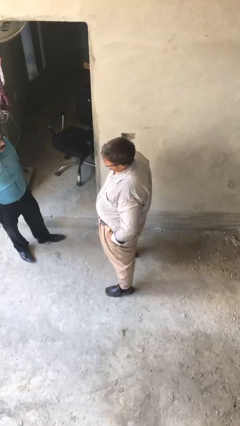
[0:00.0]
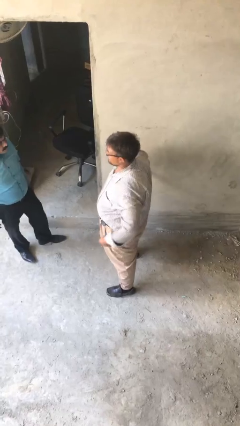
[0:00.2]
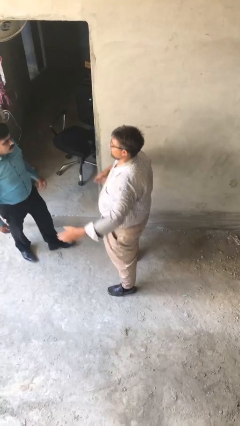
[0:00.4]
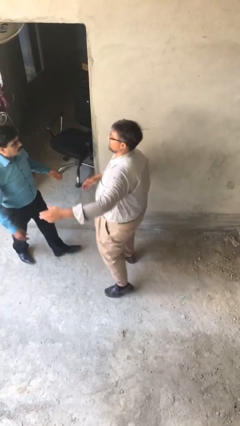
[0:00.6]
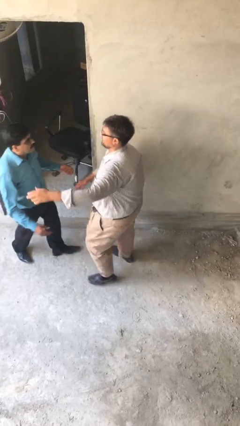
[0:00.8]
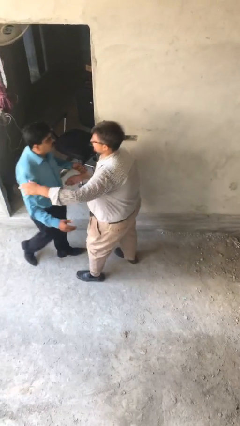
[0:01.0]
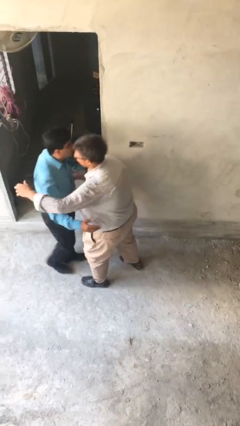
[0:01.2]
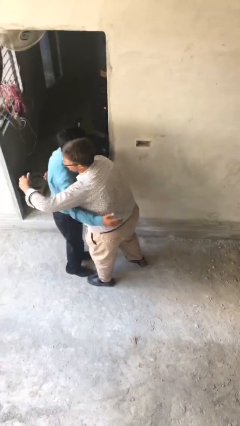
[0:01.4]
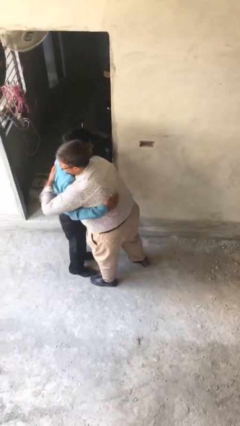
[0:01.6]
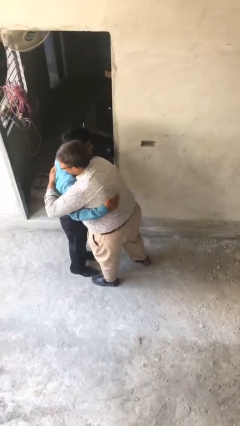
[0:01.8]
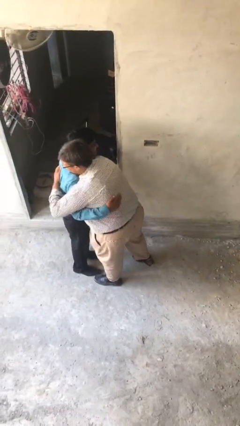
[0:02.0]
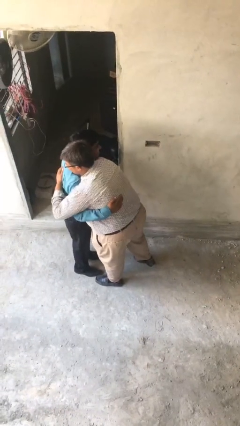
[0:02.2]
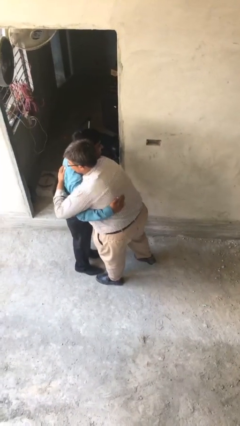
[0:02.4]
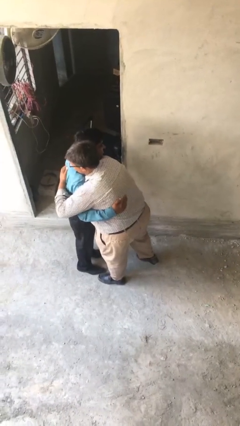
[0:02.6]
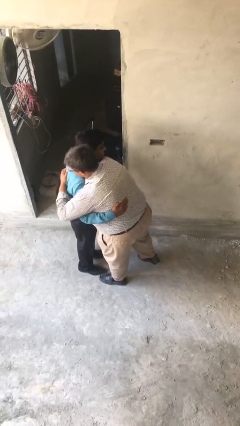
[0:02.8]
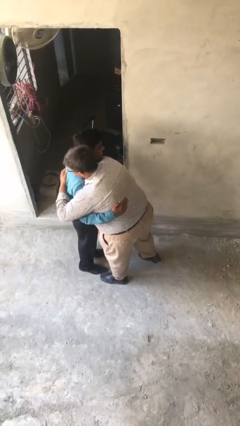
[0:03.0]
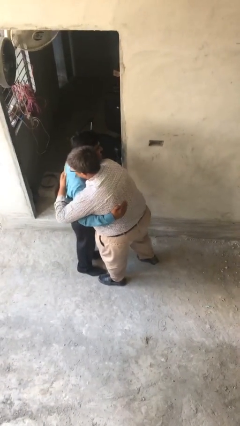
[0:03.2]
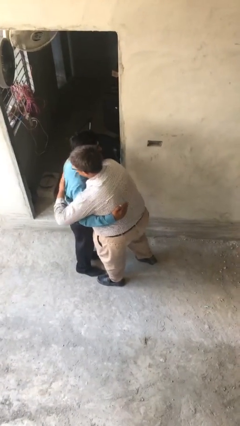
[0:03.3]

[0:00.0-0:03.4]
person embraces person

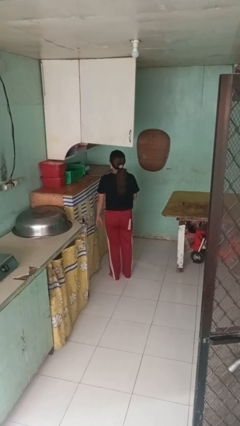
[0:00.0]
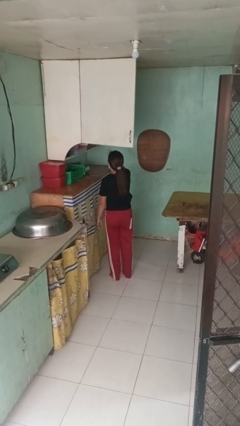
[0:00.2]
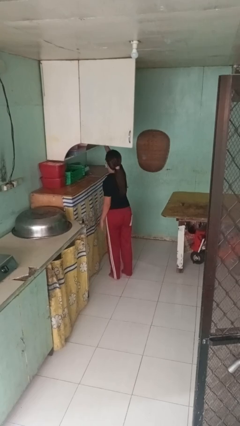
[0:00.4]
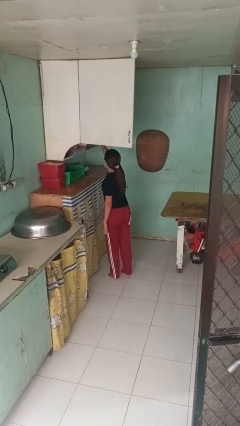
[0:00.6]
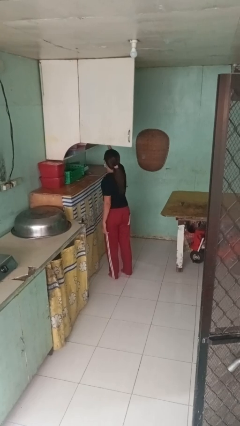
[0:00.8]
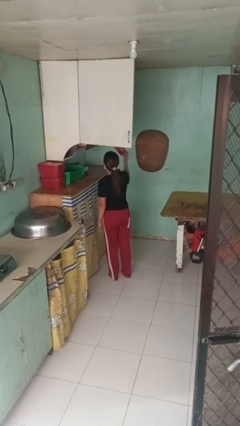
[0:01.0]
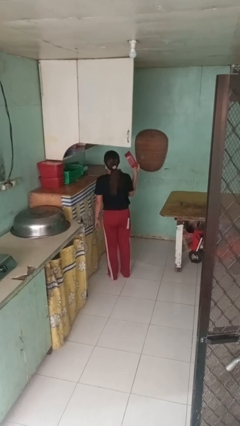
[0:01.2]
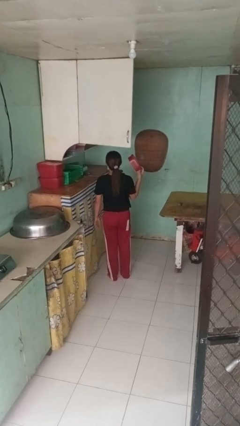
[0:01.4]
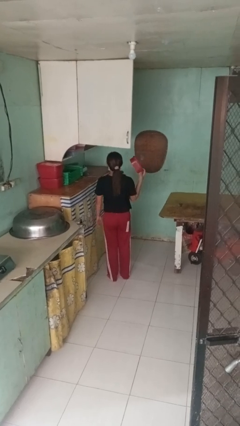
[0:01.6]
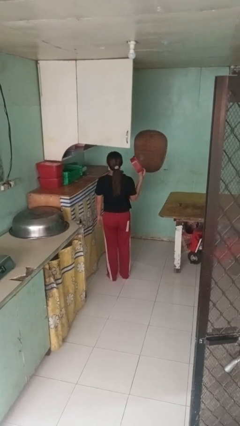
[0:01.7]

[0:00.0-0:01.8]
person takes object from cabinet

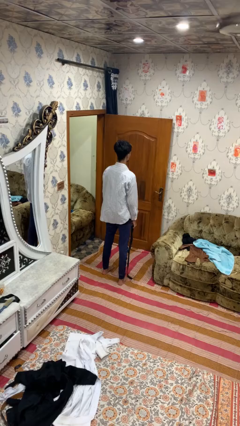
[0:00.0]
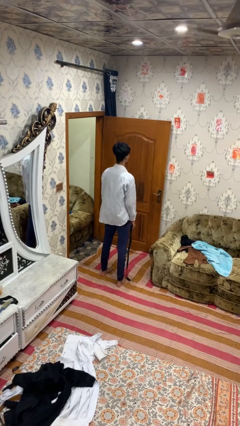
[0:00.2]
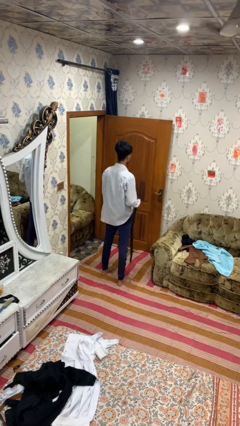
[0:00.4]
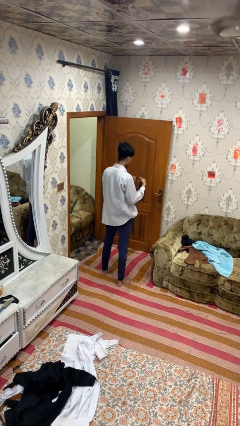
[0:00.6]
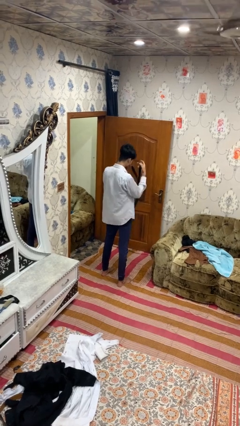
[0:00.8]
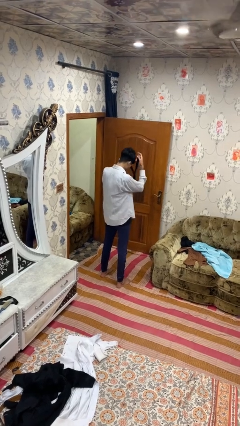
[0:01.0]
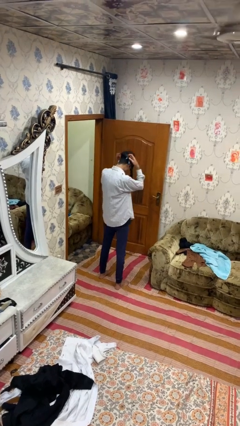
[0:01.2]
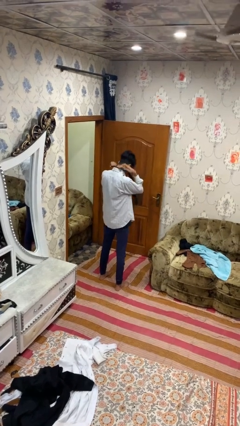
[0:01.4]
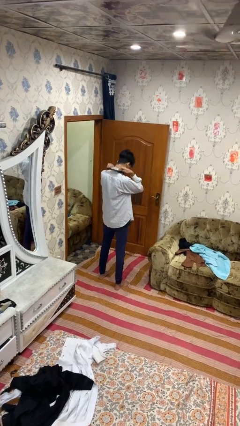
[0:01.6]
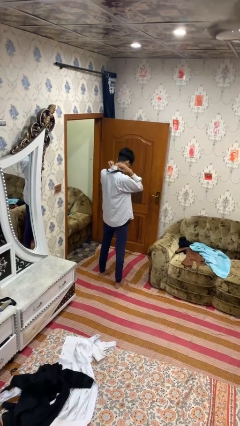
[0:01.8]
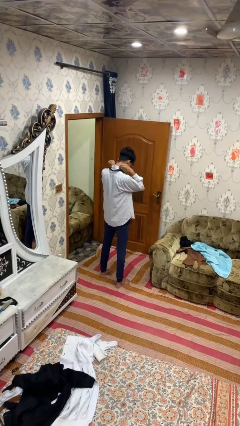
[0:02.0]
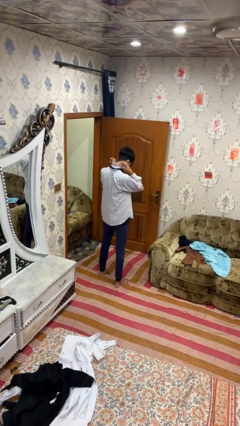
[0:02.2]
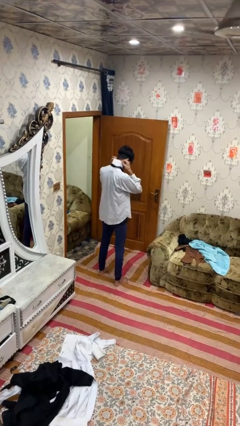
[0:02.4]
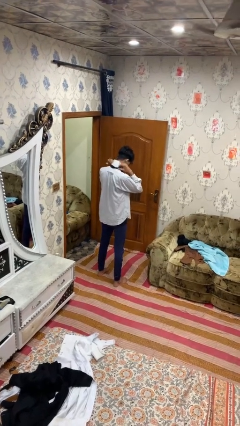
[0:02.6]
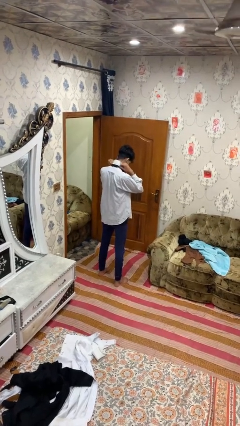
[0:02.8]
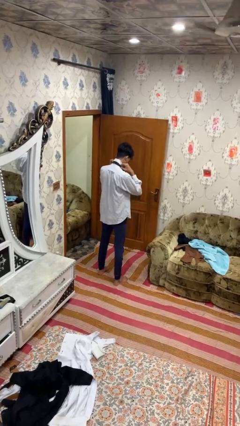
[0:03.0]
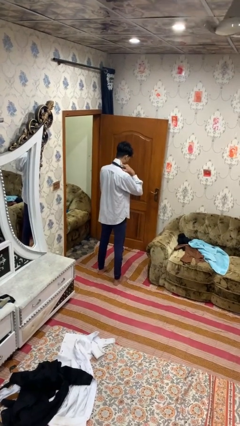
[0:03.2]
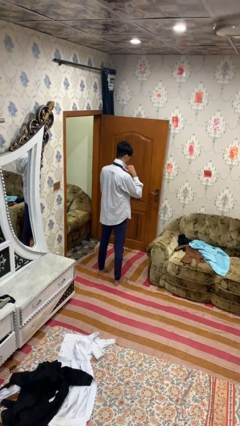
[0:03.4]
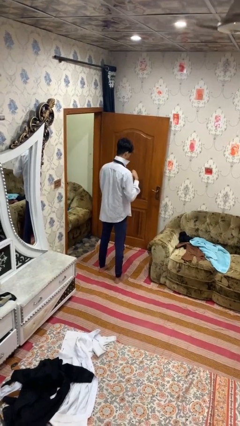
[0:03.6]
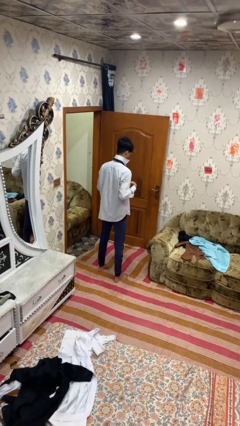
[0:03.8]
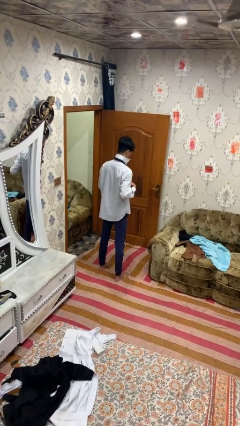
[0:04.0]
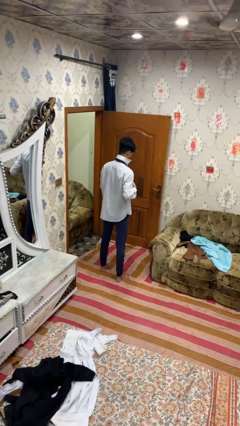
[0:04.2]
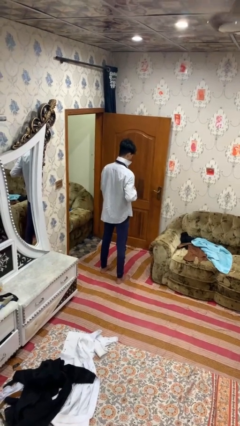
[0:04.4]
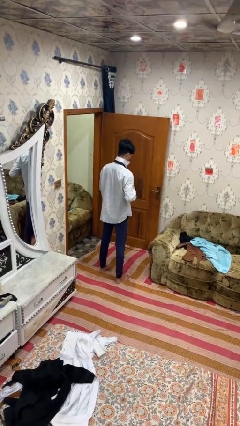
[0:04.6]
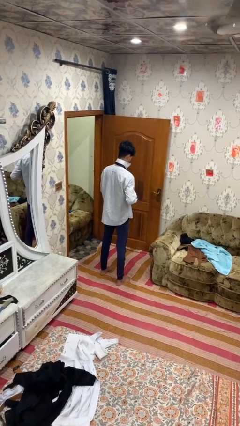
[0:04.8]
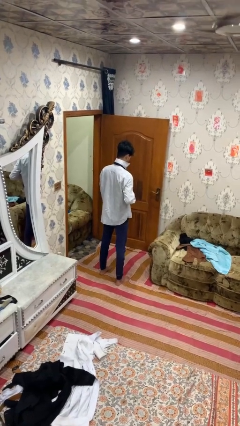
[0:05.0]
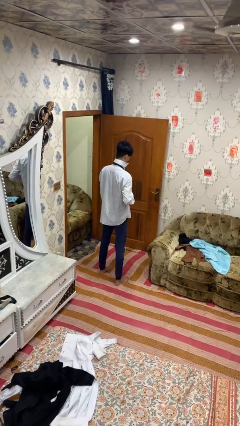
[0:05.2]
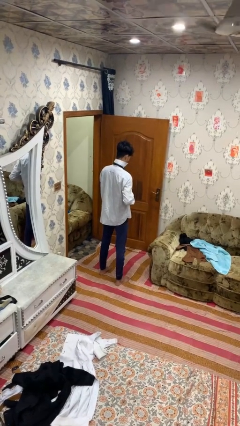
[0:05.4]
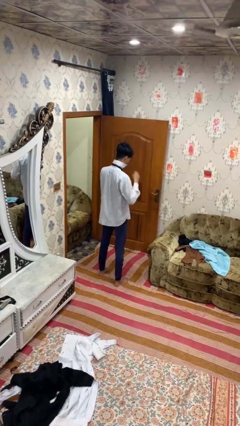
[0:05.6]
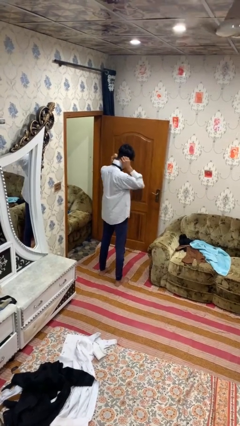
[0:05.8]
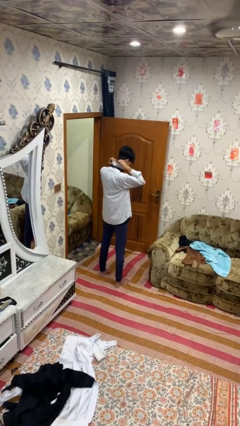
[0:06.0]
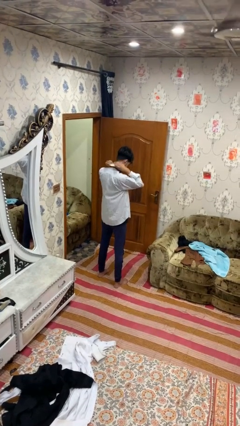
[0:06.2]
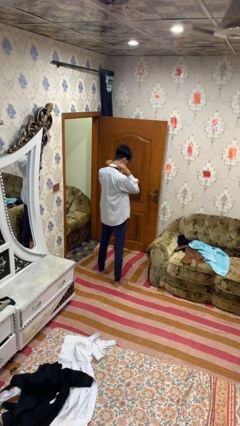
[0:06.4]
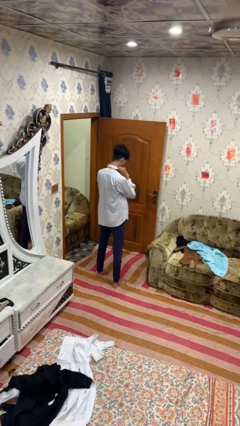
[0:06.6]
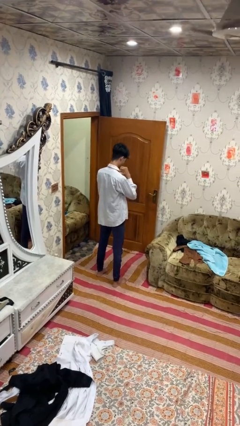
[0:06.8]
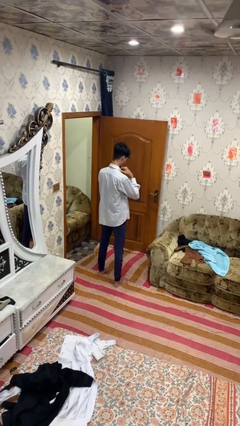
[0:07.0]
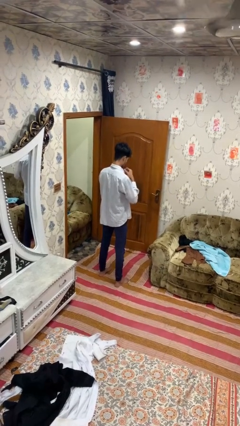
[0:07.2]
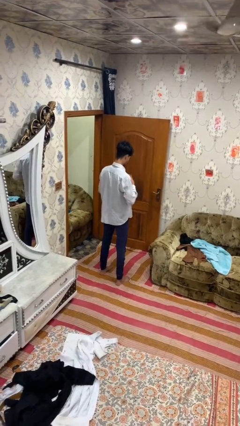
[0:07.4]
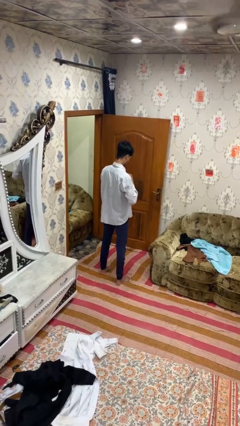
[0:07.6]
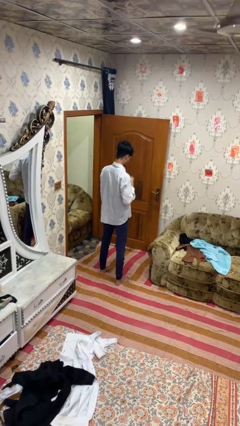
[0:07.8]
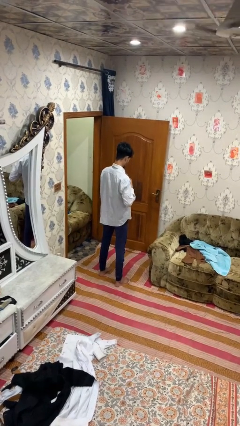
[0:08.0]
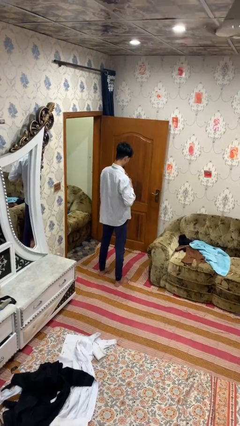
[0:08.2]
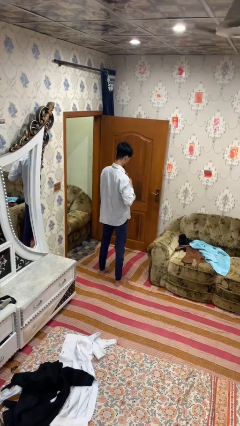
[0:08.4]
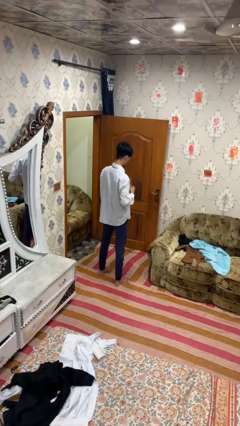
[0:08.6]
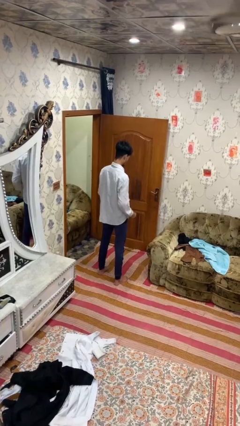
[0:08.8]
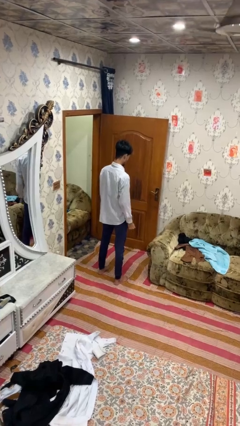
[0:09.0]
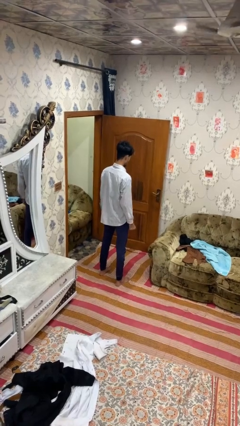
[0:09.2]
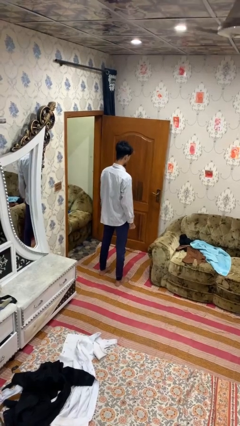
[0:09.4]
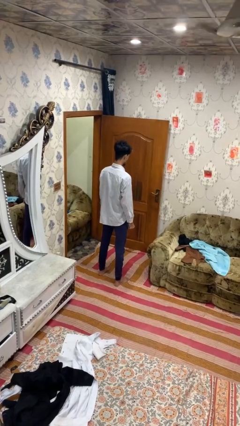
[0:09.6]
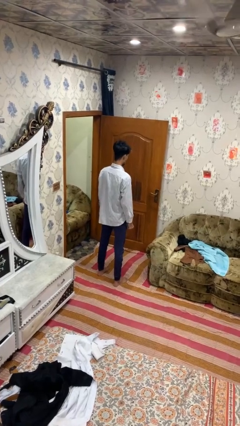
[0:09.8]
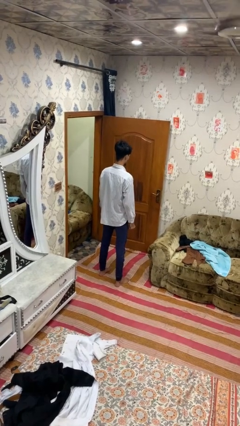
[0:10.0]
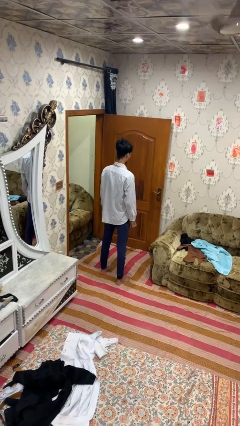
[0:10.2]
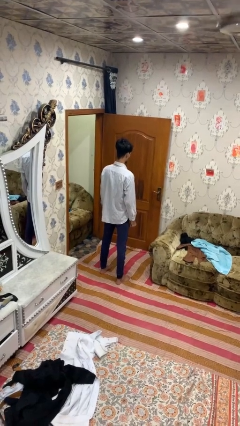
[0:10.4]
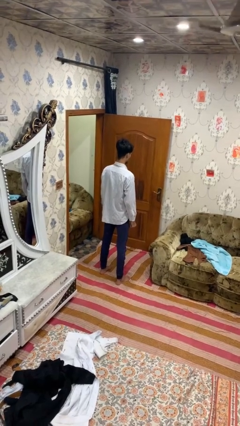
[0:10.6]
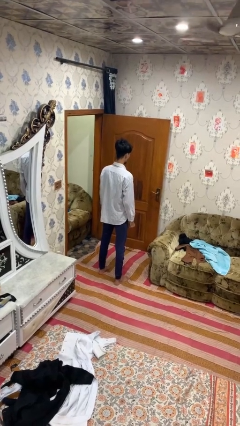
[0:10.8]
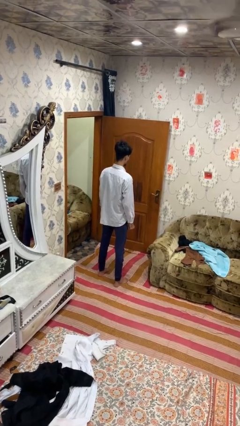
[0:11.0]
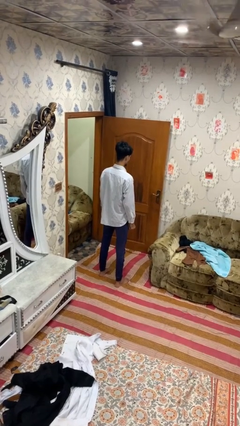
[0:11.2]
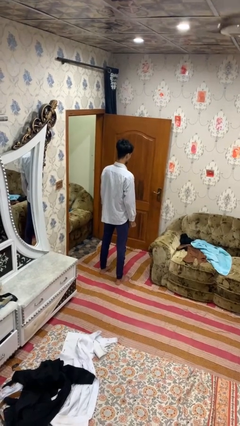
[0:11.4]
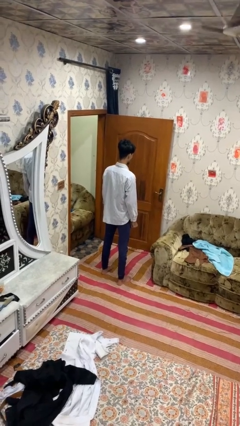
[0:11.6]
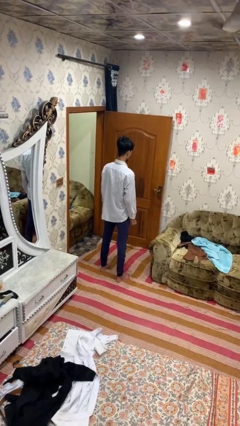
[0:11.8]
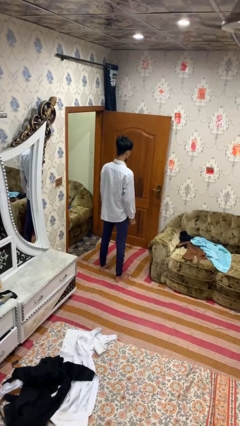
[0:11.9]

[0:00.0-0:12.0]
person puts on necktie

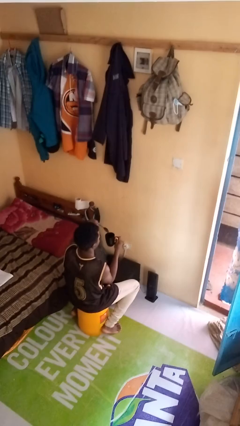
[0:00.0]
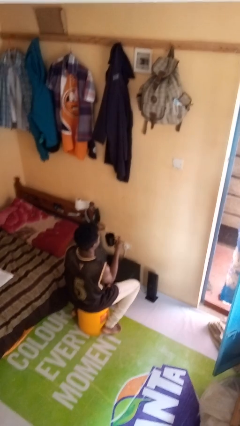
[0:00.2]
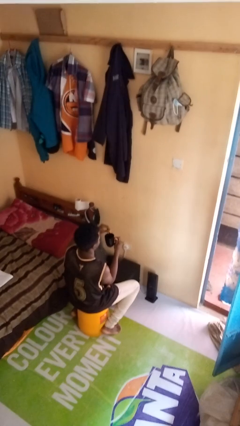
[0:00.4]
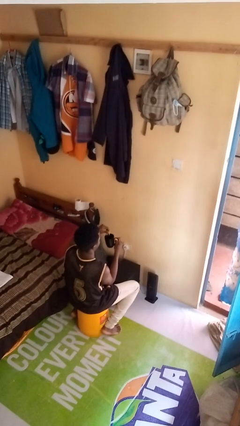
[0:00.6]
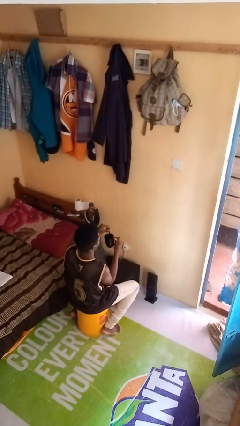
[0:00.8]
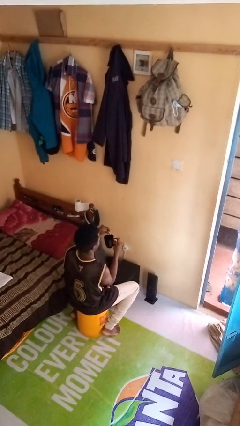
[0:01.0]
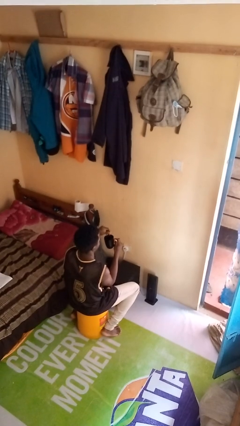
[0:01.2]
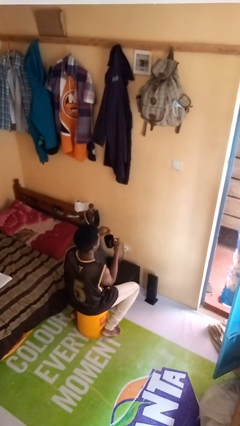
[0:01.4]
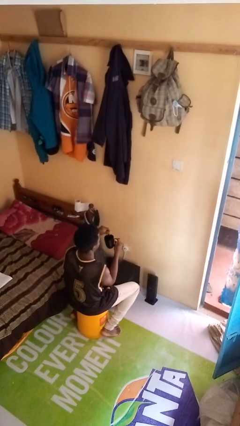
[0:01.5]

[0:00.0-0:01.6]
person stirs mug
